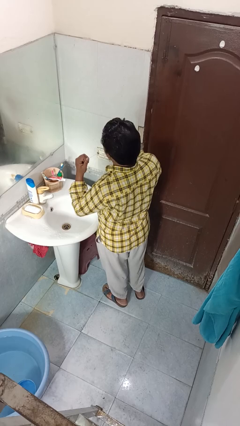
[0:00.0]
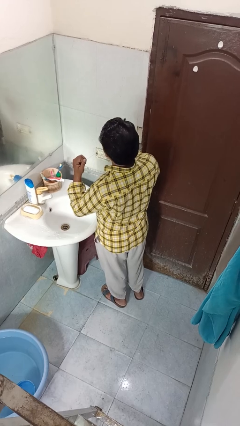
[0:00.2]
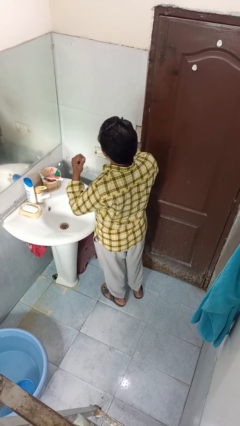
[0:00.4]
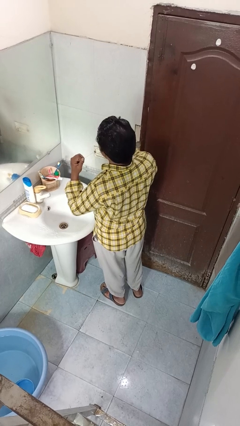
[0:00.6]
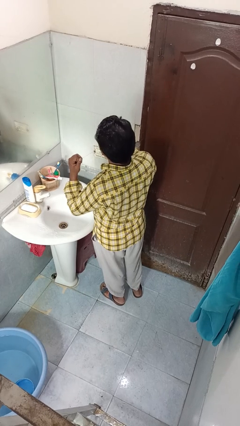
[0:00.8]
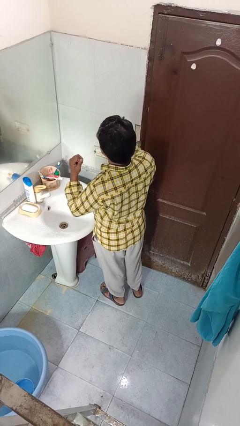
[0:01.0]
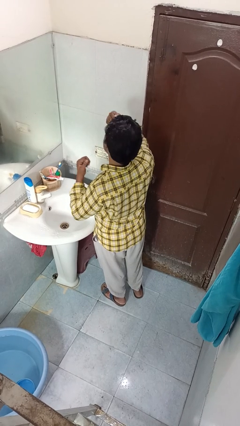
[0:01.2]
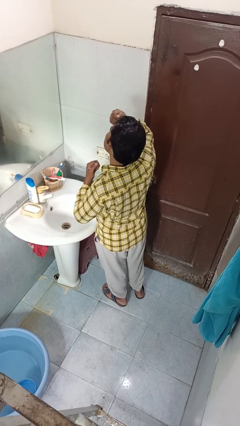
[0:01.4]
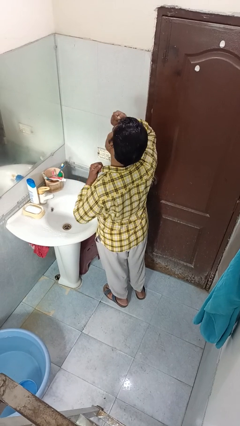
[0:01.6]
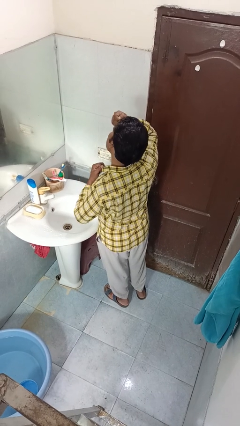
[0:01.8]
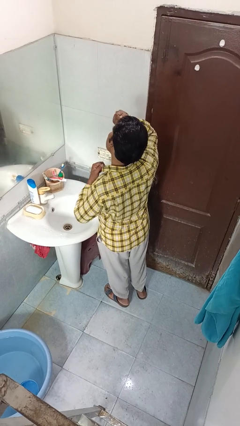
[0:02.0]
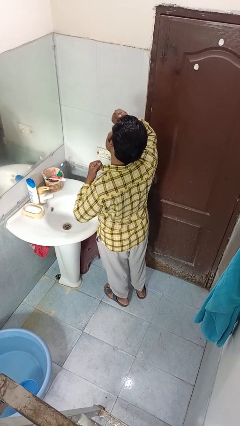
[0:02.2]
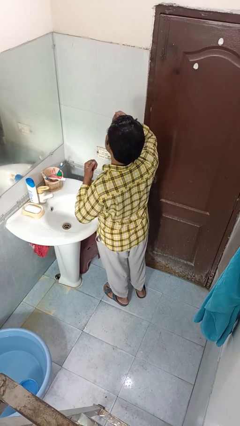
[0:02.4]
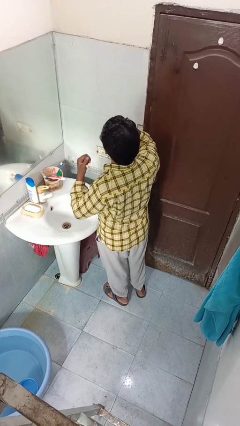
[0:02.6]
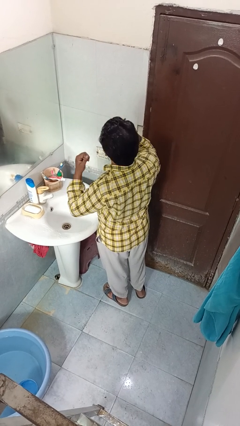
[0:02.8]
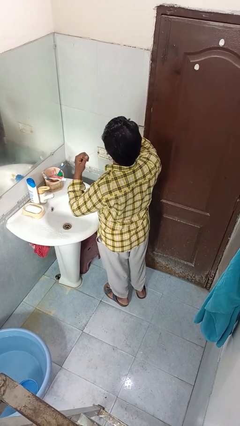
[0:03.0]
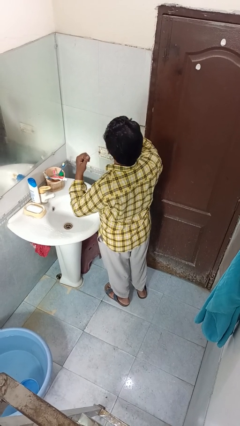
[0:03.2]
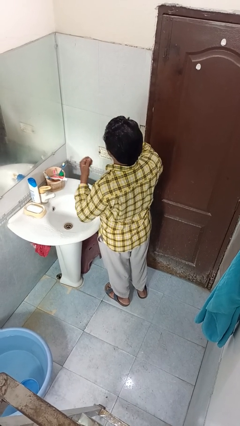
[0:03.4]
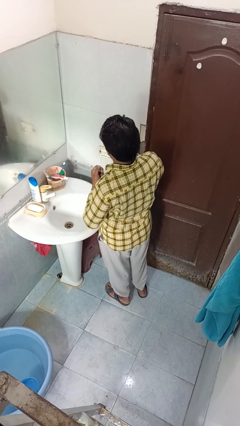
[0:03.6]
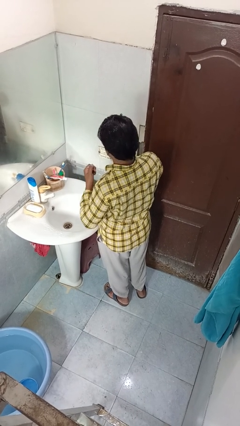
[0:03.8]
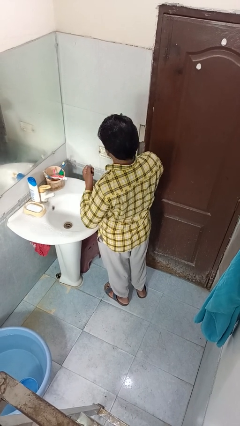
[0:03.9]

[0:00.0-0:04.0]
person flosses

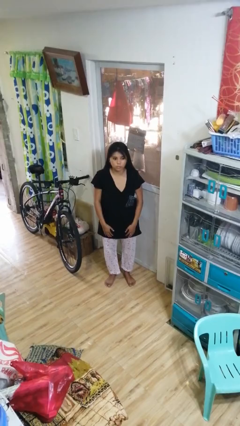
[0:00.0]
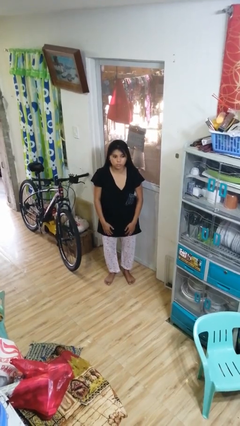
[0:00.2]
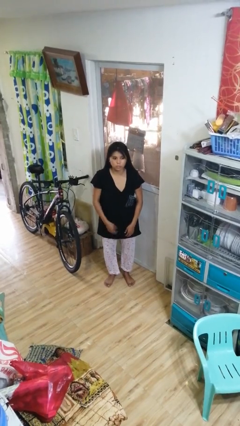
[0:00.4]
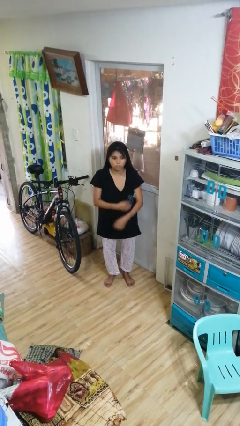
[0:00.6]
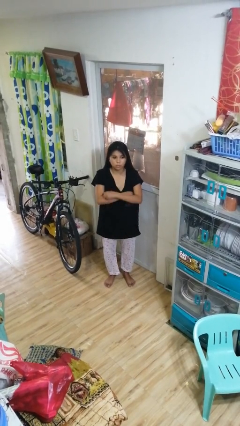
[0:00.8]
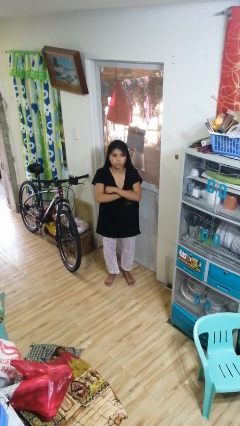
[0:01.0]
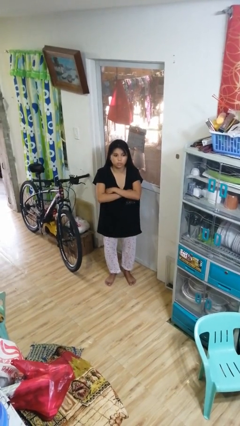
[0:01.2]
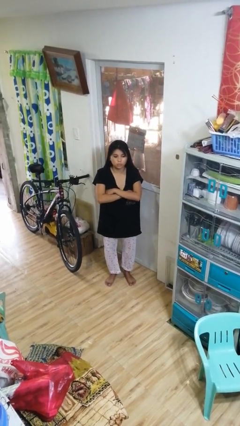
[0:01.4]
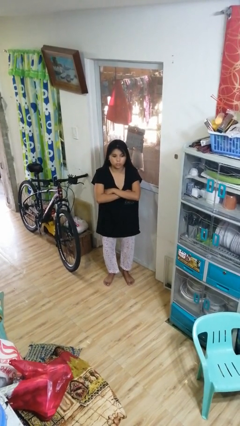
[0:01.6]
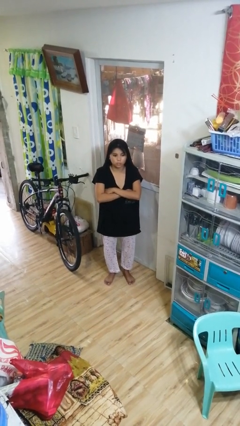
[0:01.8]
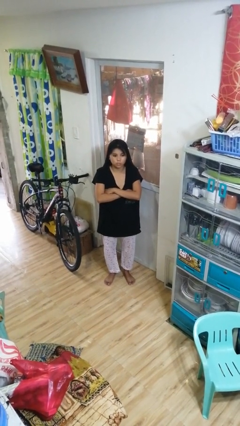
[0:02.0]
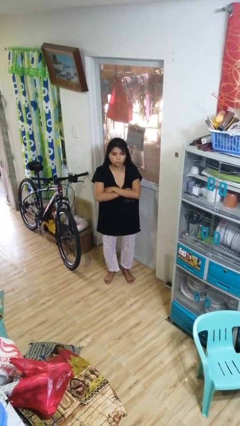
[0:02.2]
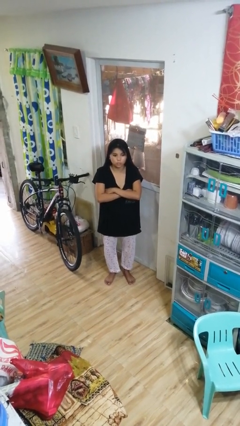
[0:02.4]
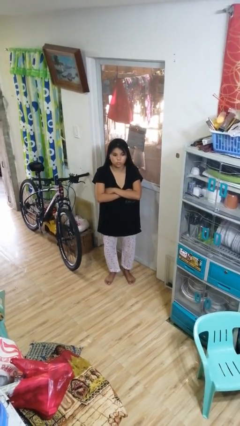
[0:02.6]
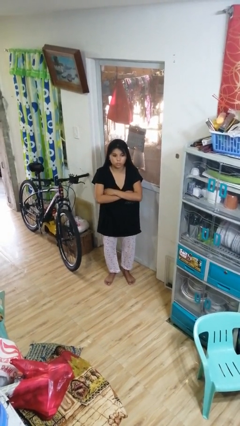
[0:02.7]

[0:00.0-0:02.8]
person crosses arms

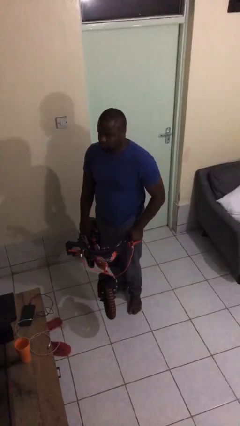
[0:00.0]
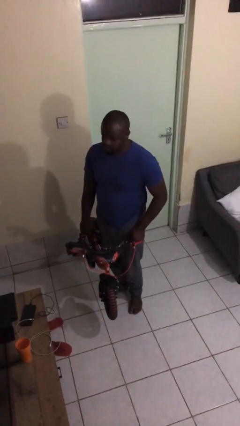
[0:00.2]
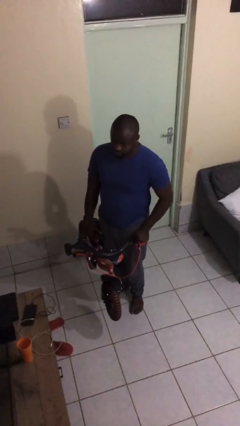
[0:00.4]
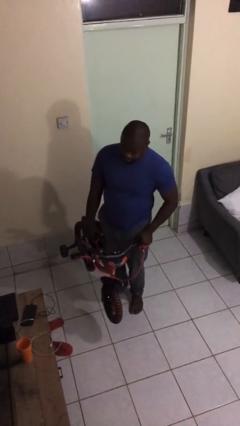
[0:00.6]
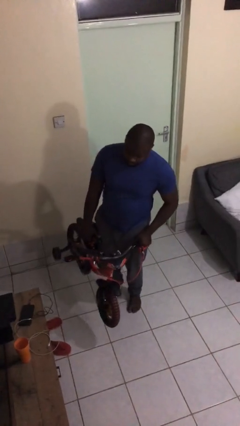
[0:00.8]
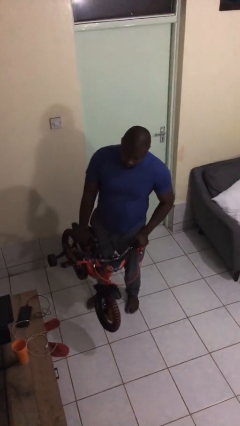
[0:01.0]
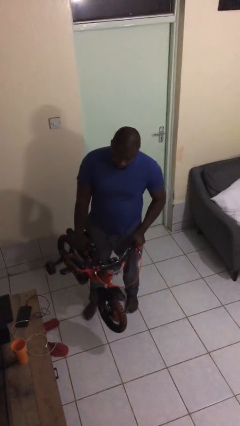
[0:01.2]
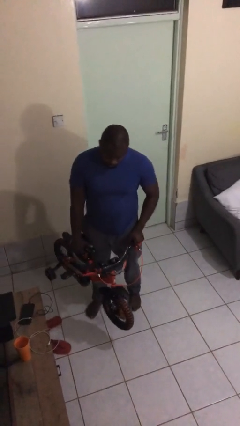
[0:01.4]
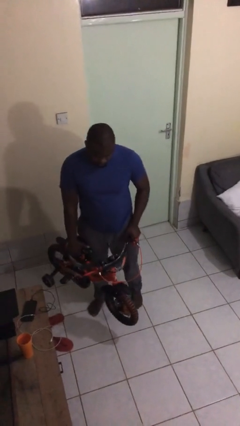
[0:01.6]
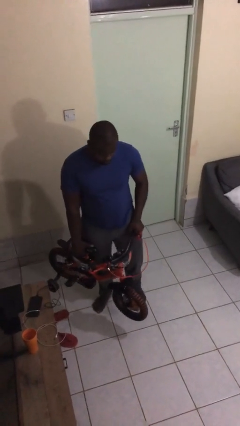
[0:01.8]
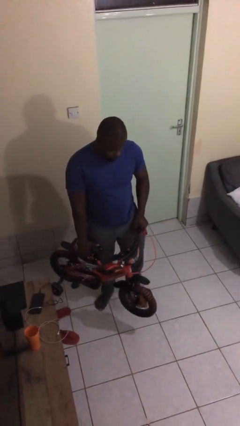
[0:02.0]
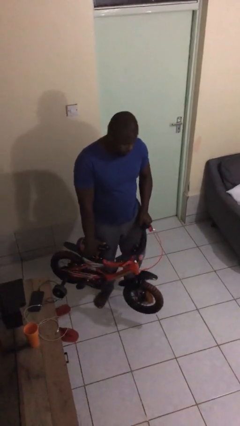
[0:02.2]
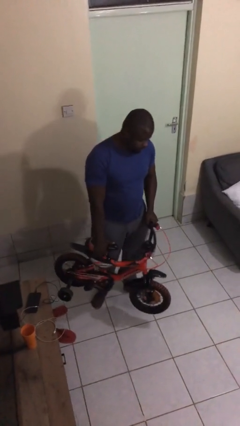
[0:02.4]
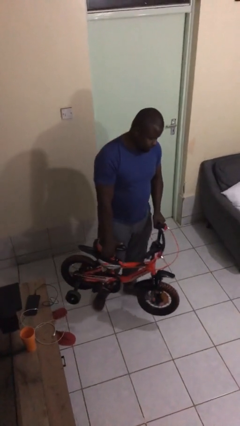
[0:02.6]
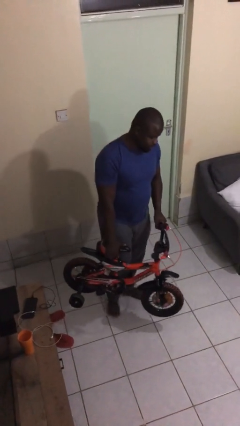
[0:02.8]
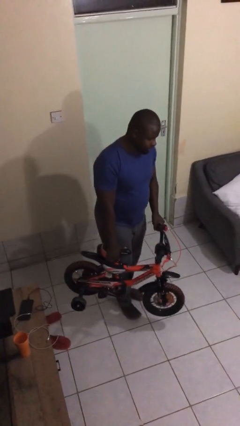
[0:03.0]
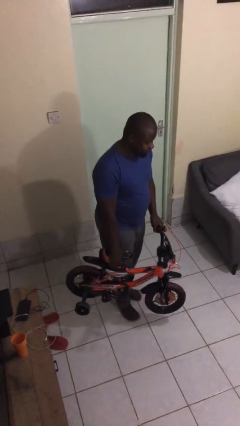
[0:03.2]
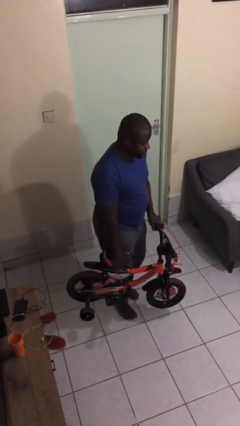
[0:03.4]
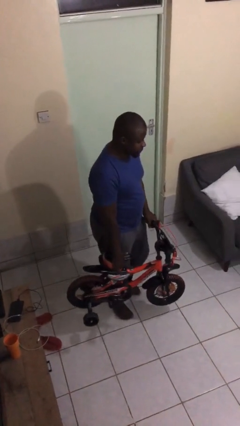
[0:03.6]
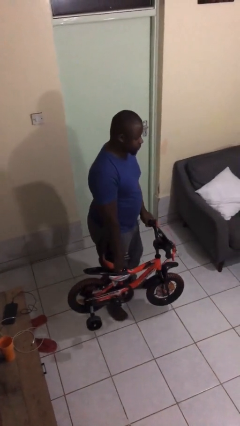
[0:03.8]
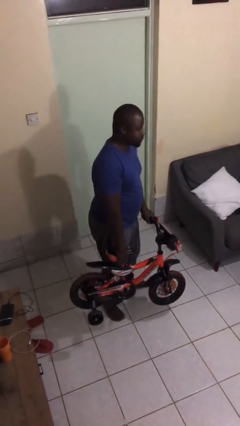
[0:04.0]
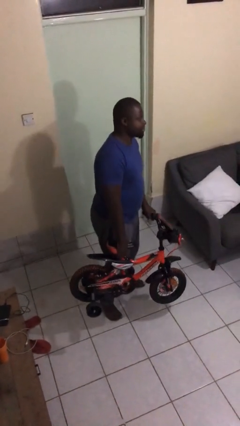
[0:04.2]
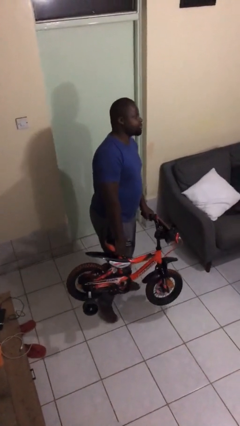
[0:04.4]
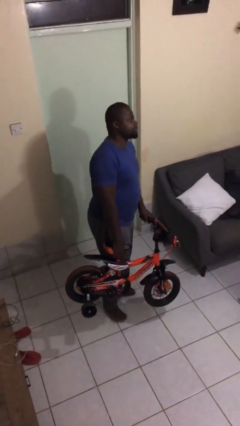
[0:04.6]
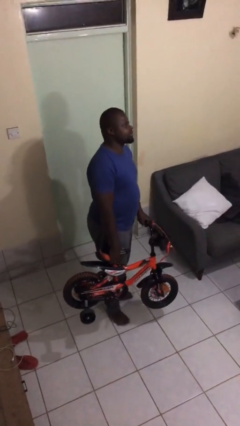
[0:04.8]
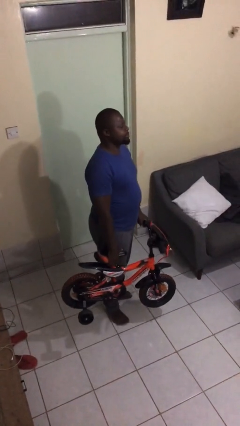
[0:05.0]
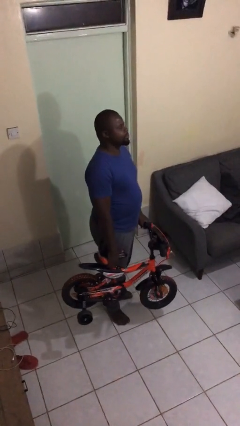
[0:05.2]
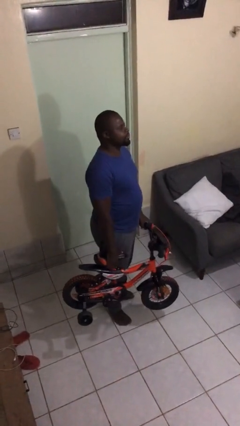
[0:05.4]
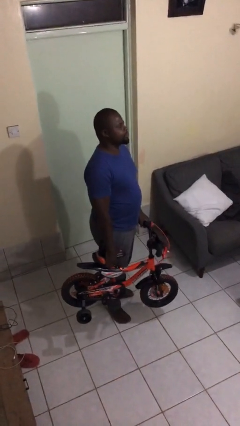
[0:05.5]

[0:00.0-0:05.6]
person carries bicycle

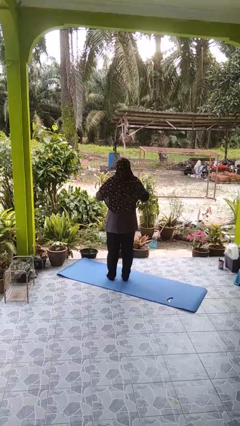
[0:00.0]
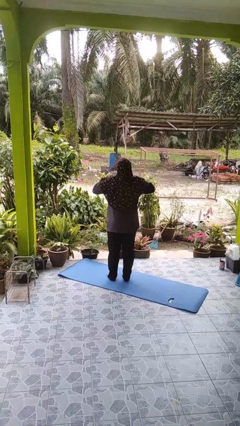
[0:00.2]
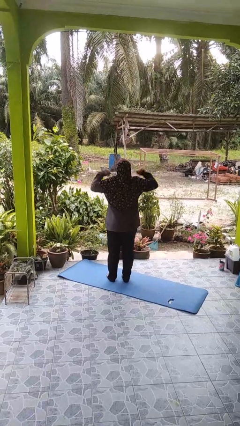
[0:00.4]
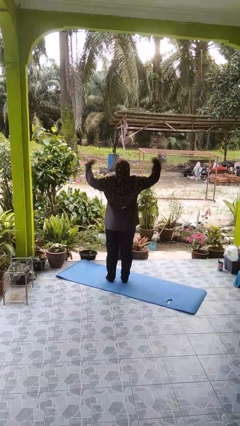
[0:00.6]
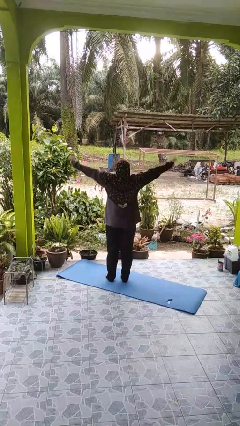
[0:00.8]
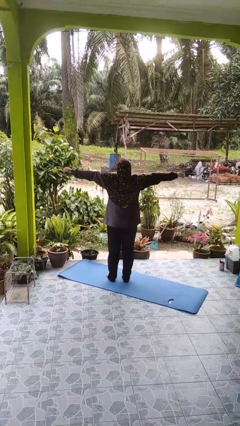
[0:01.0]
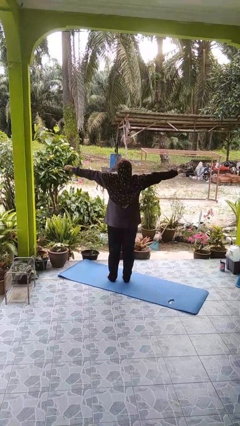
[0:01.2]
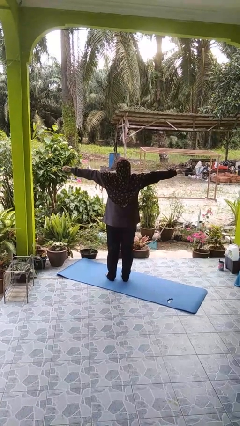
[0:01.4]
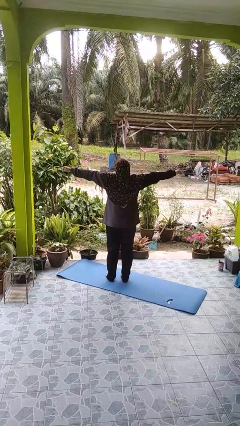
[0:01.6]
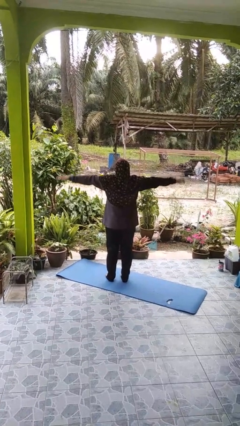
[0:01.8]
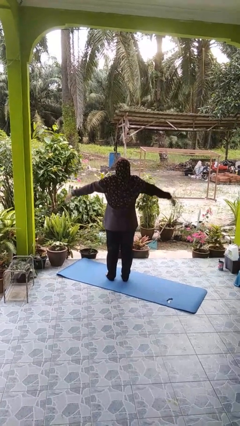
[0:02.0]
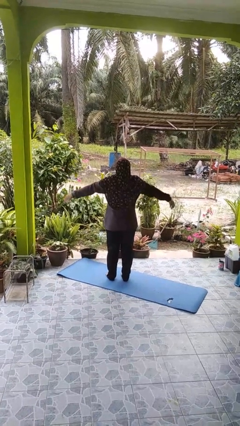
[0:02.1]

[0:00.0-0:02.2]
person stretches arms to side

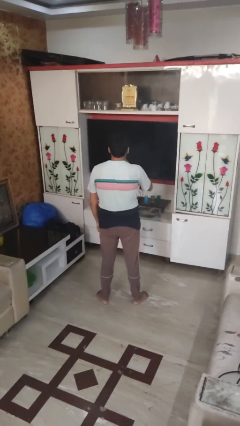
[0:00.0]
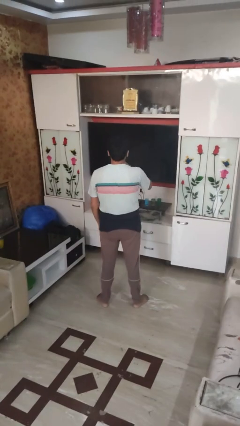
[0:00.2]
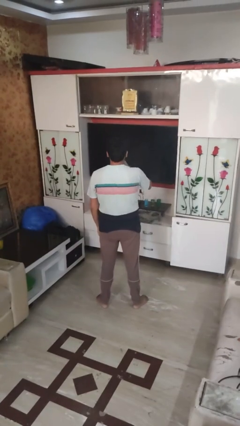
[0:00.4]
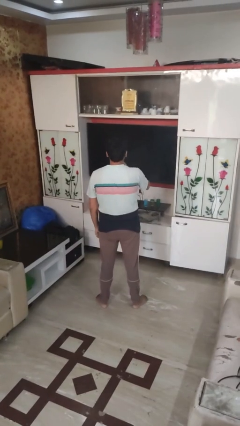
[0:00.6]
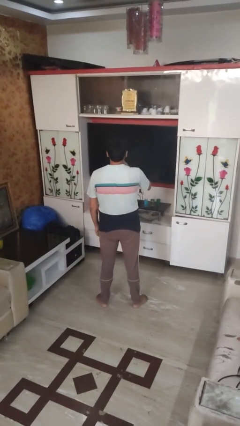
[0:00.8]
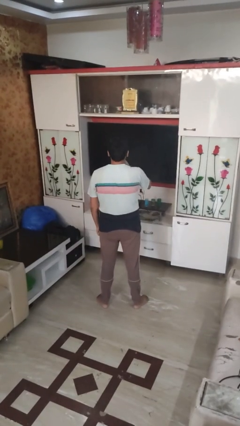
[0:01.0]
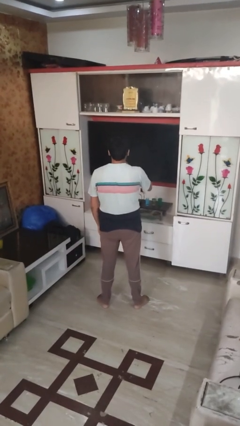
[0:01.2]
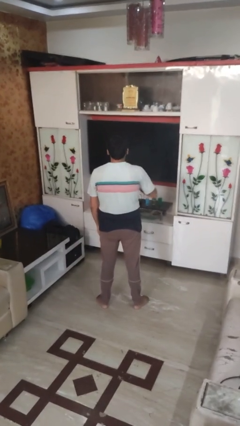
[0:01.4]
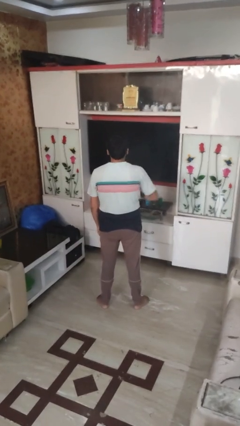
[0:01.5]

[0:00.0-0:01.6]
person strokes chin

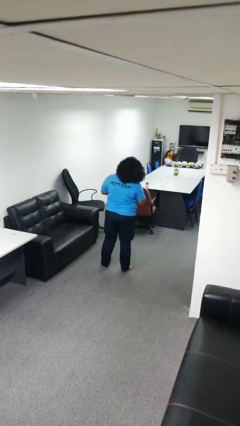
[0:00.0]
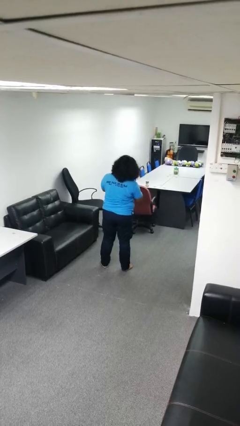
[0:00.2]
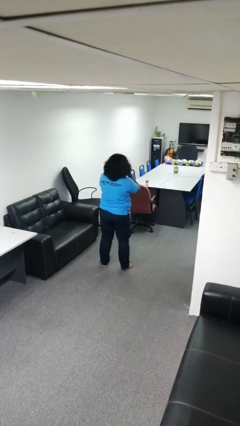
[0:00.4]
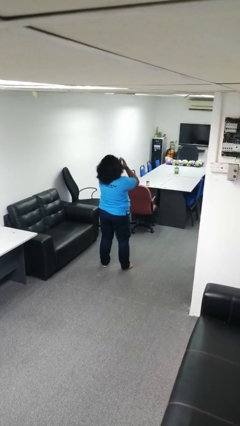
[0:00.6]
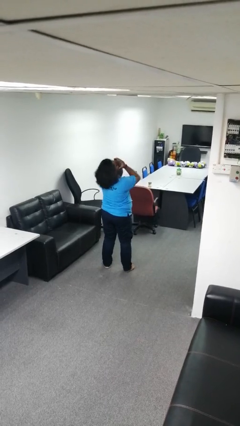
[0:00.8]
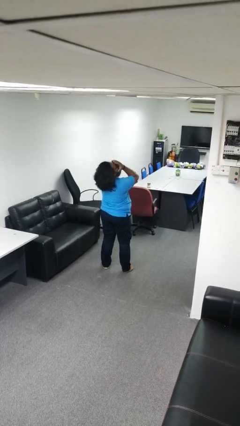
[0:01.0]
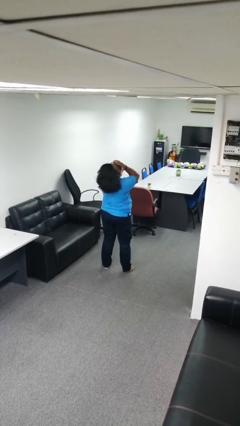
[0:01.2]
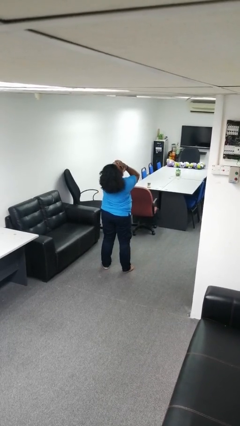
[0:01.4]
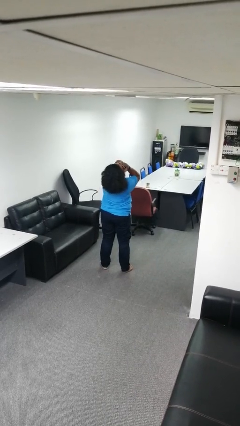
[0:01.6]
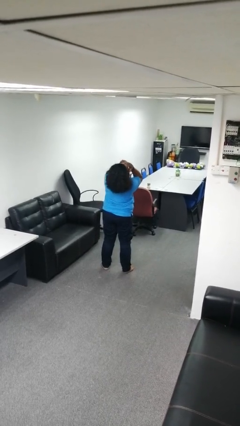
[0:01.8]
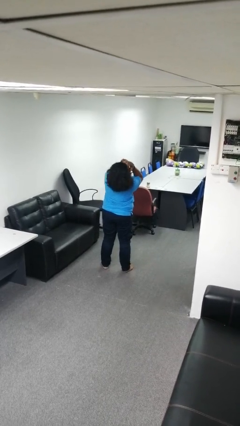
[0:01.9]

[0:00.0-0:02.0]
person covers face with hands
